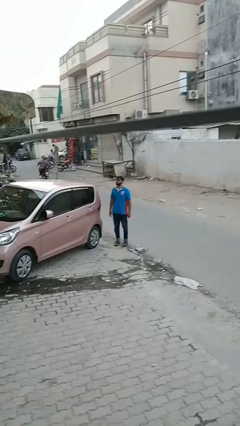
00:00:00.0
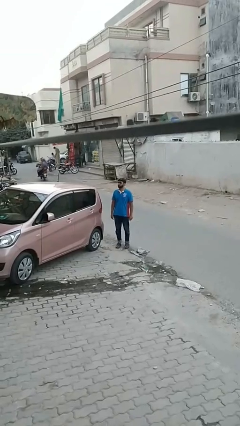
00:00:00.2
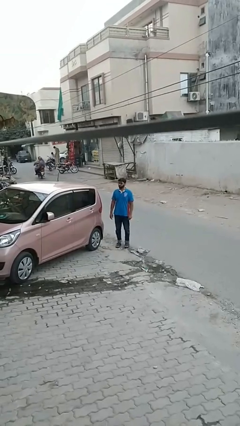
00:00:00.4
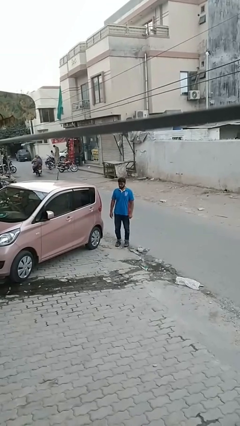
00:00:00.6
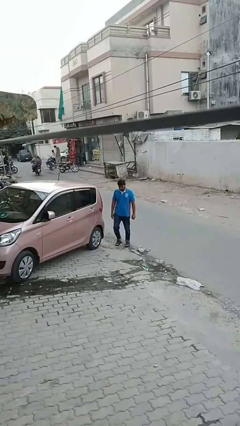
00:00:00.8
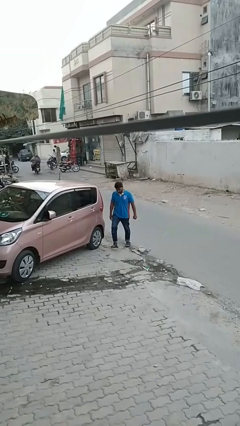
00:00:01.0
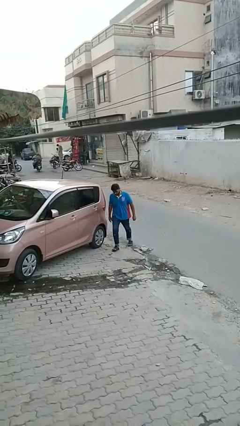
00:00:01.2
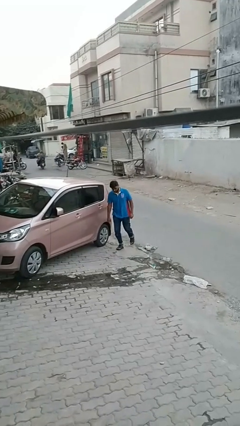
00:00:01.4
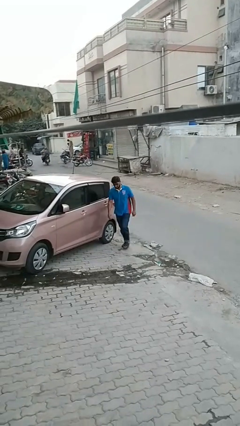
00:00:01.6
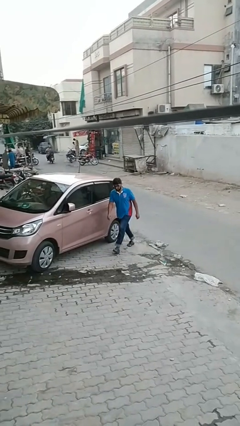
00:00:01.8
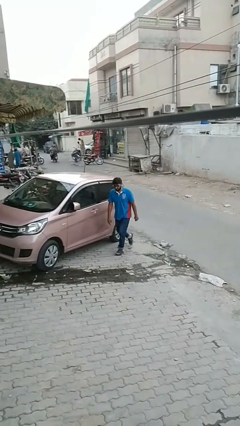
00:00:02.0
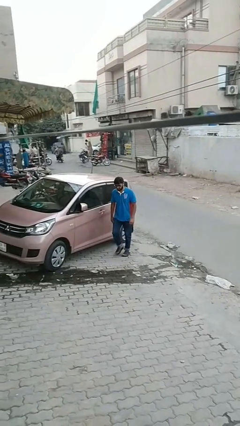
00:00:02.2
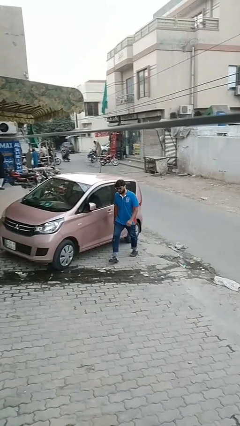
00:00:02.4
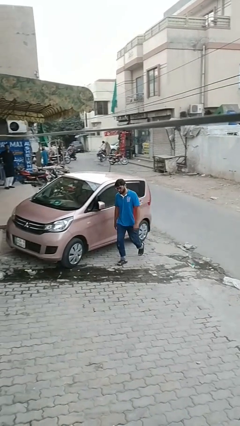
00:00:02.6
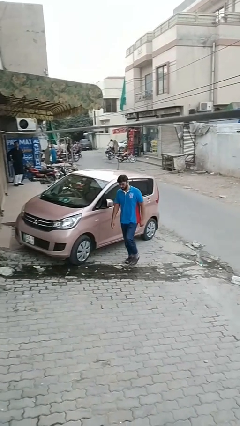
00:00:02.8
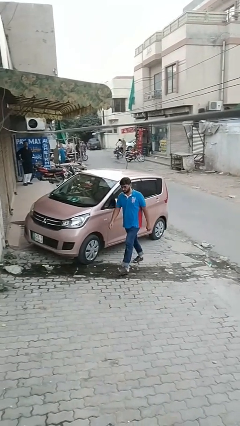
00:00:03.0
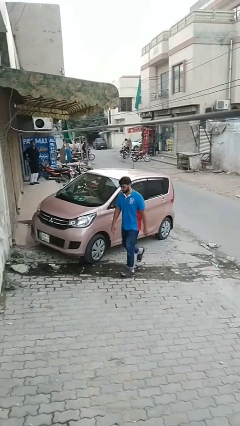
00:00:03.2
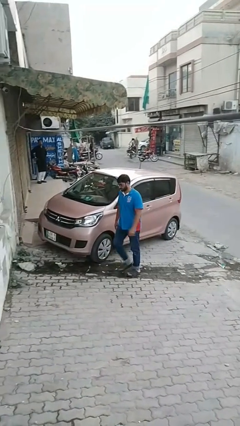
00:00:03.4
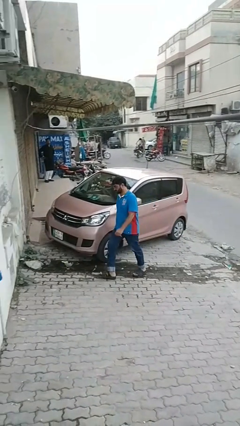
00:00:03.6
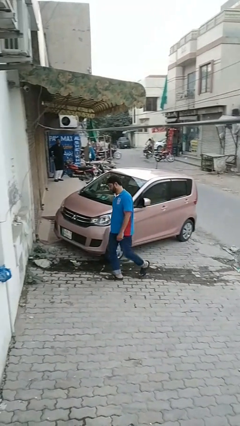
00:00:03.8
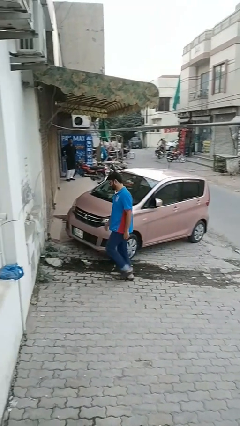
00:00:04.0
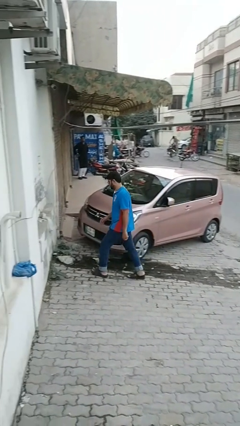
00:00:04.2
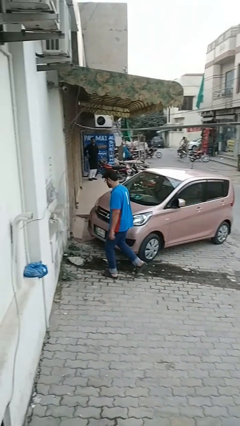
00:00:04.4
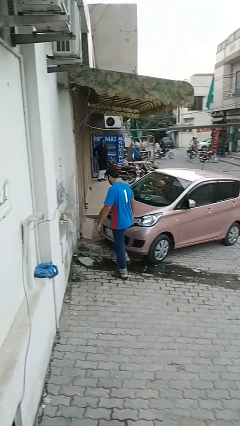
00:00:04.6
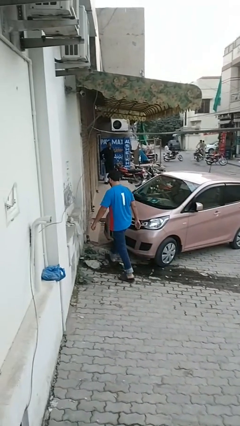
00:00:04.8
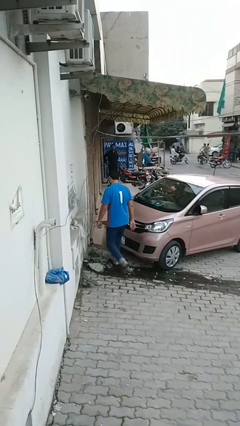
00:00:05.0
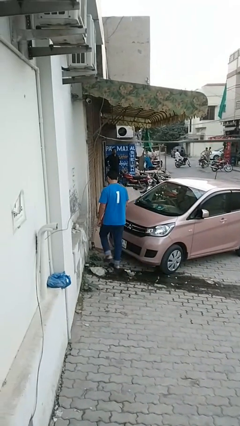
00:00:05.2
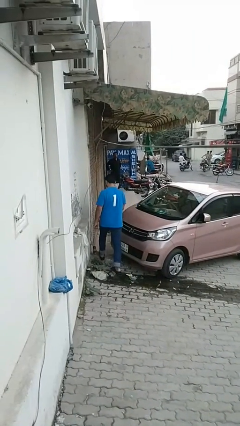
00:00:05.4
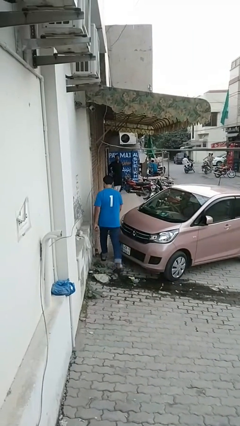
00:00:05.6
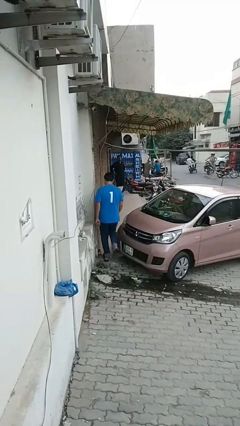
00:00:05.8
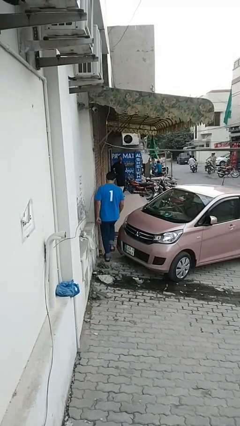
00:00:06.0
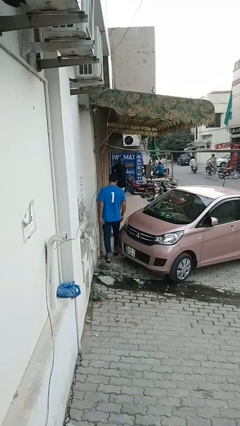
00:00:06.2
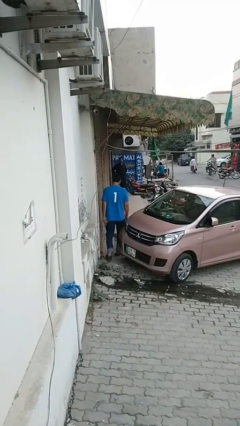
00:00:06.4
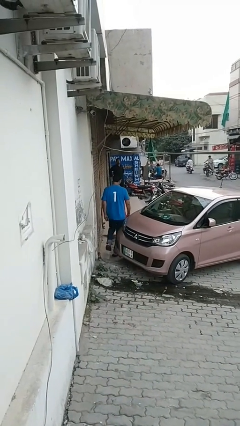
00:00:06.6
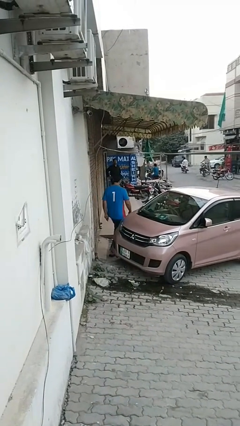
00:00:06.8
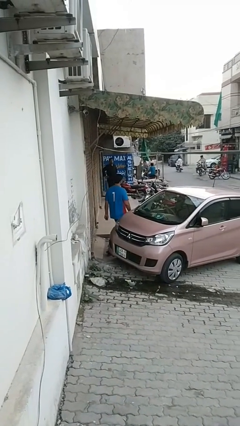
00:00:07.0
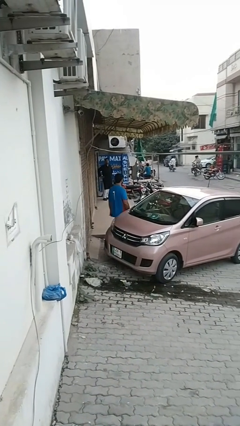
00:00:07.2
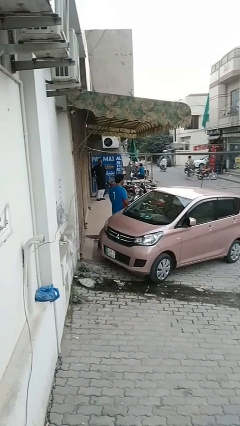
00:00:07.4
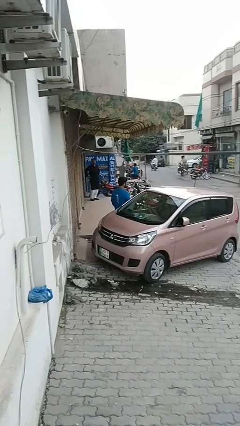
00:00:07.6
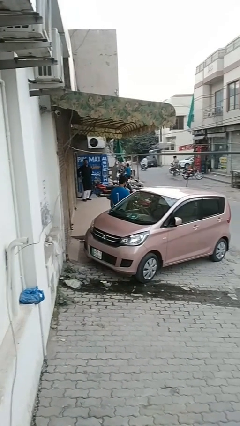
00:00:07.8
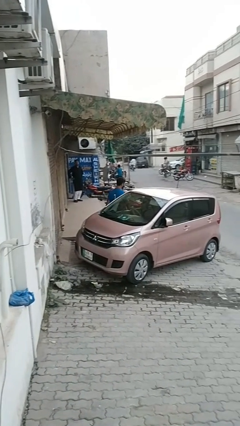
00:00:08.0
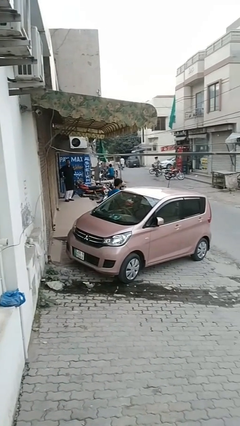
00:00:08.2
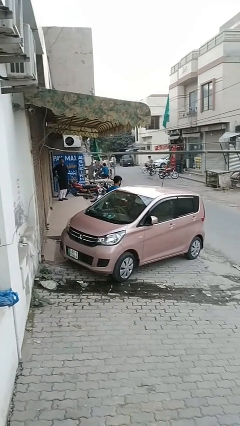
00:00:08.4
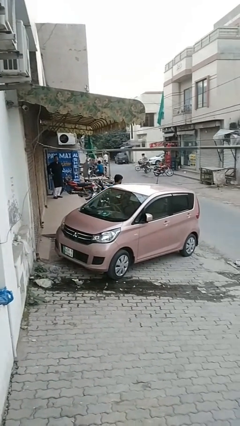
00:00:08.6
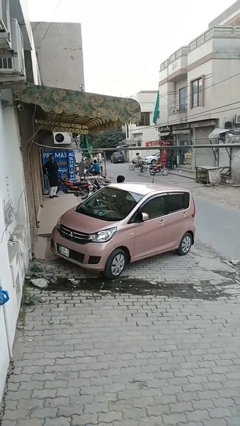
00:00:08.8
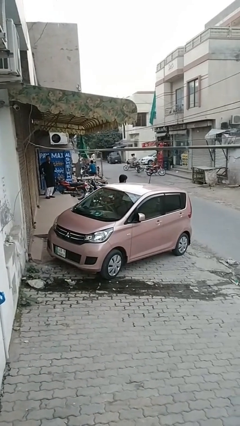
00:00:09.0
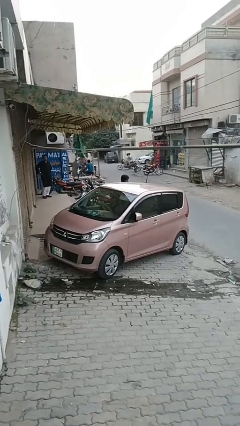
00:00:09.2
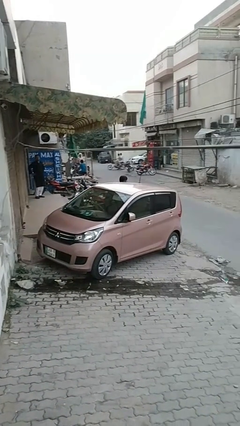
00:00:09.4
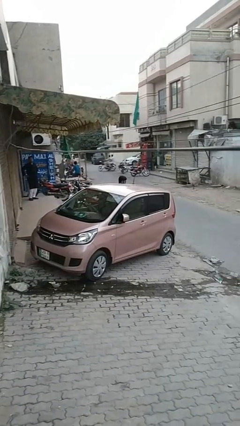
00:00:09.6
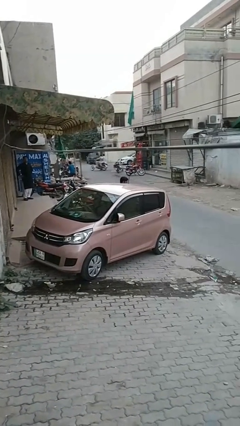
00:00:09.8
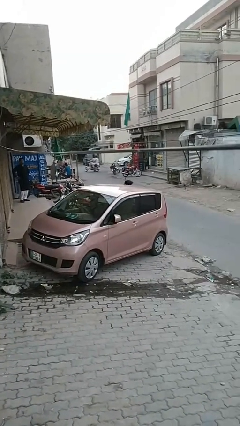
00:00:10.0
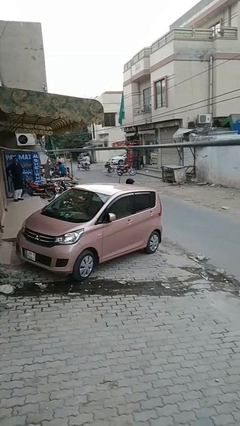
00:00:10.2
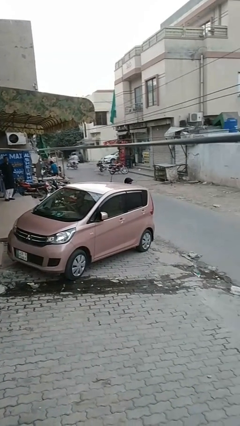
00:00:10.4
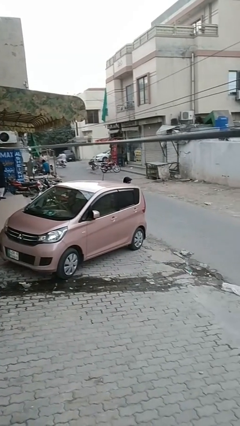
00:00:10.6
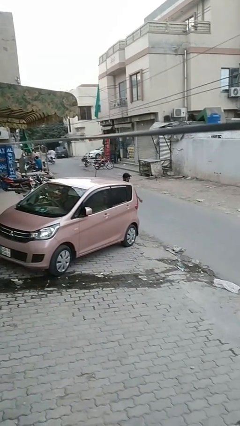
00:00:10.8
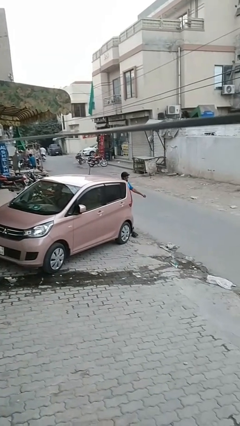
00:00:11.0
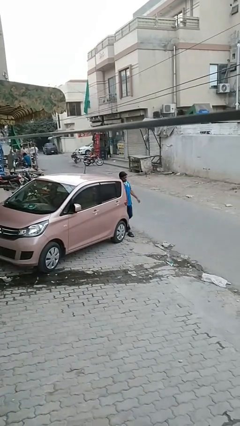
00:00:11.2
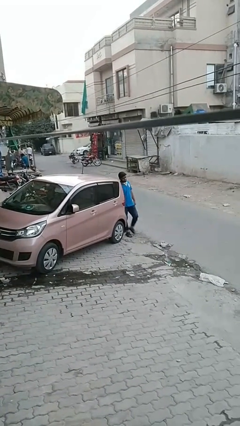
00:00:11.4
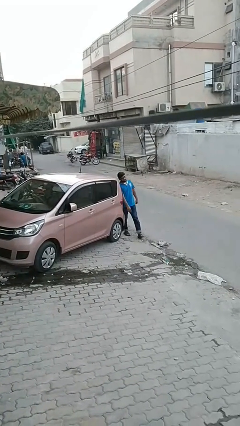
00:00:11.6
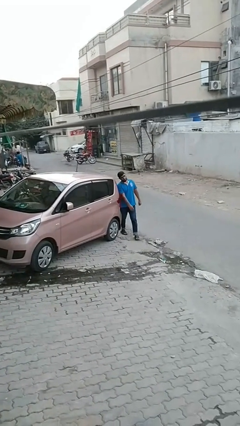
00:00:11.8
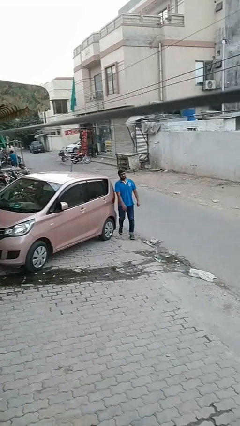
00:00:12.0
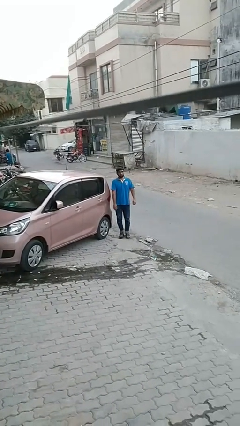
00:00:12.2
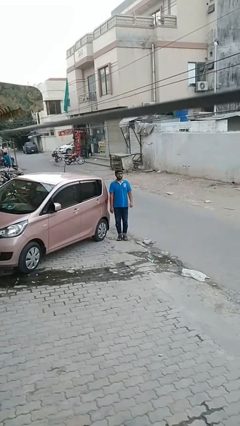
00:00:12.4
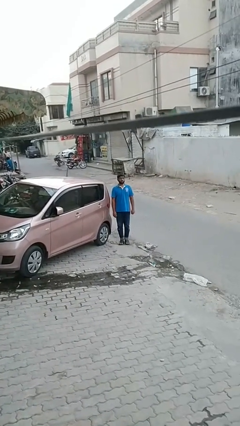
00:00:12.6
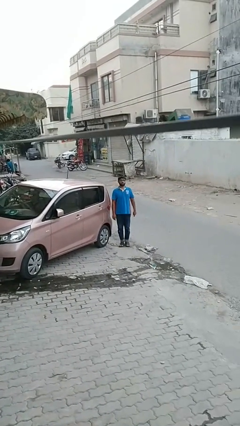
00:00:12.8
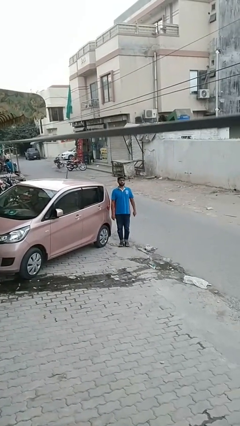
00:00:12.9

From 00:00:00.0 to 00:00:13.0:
person walks around car

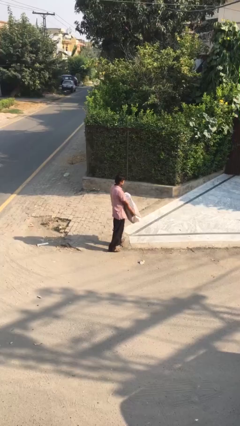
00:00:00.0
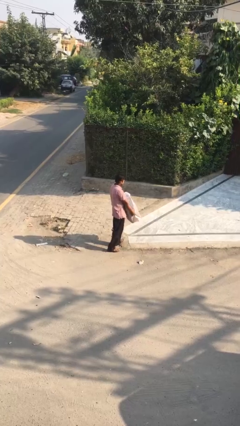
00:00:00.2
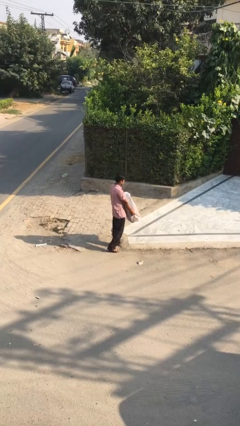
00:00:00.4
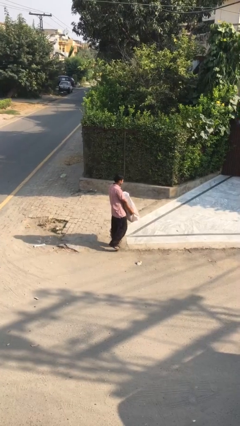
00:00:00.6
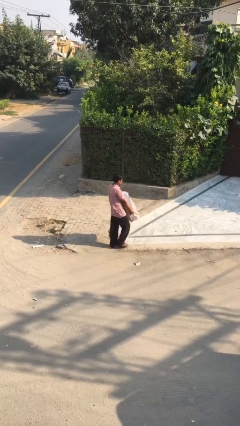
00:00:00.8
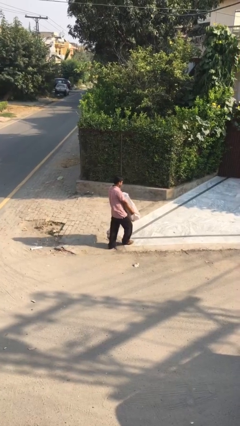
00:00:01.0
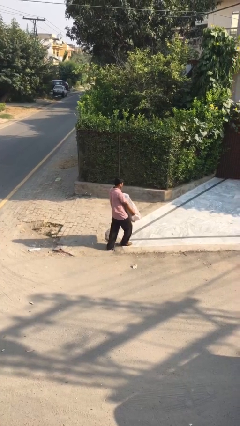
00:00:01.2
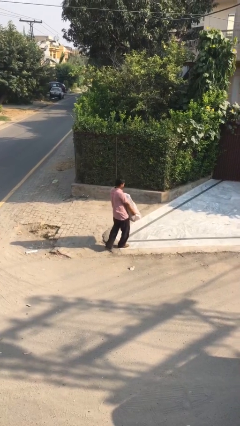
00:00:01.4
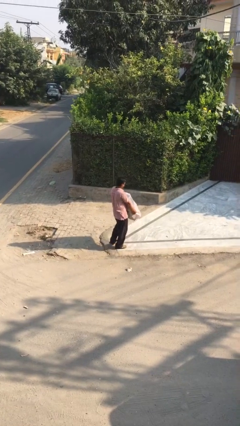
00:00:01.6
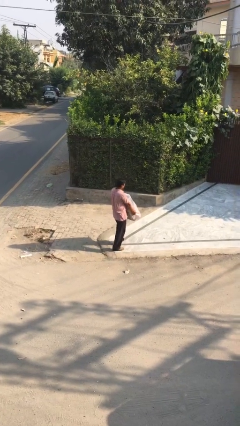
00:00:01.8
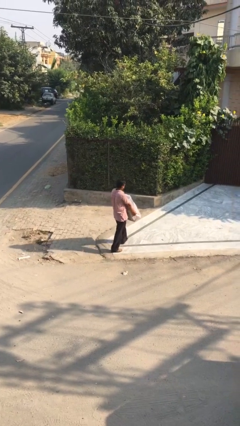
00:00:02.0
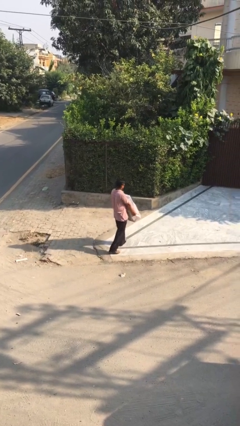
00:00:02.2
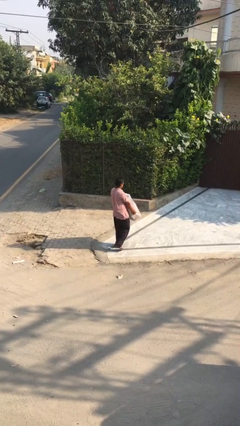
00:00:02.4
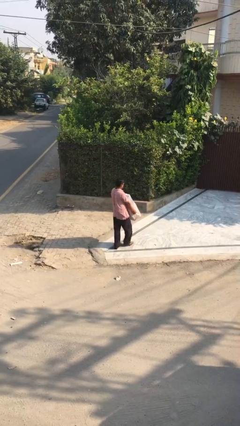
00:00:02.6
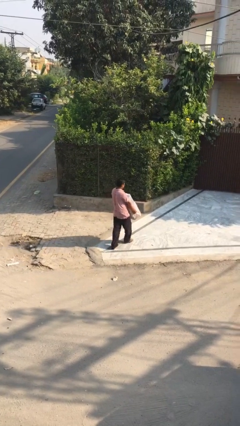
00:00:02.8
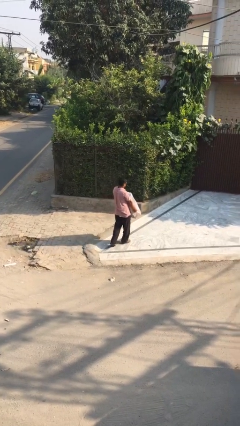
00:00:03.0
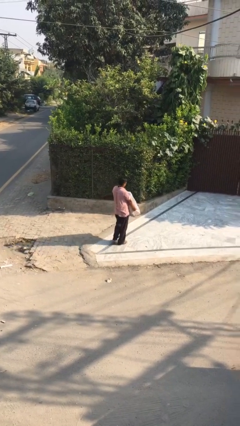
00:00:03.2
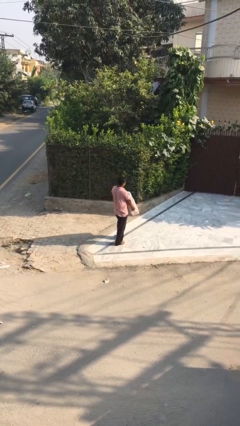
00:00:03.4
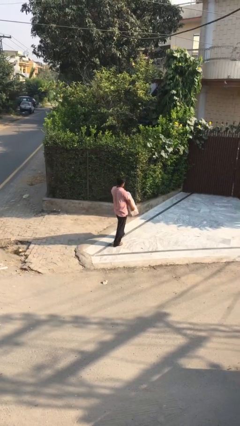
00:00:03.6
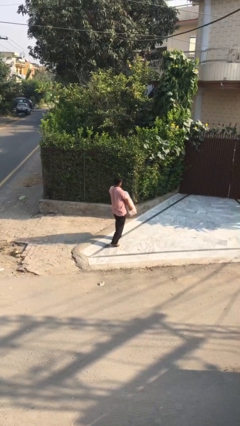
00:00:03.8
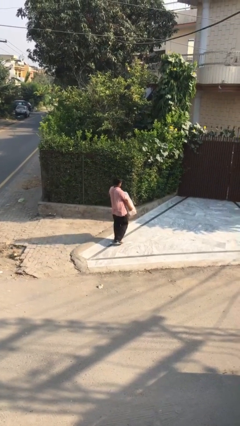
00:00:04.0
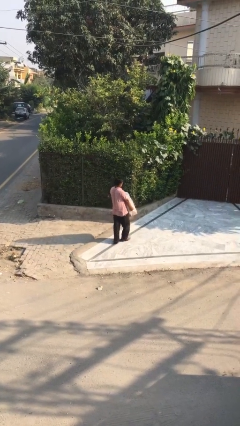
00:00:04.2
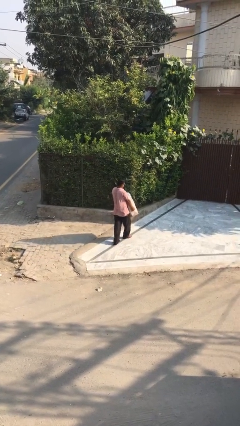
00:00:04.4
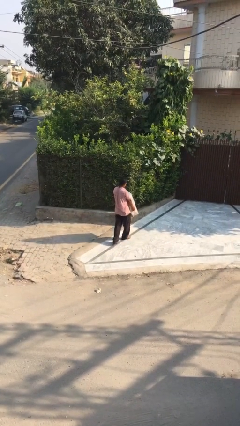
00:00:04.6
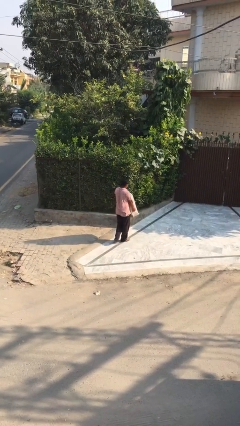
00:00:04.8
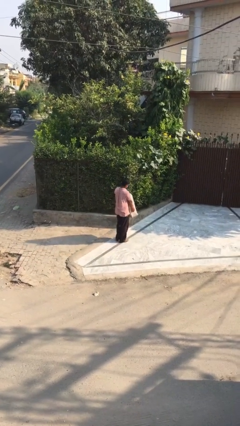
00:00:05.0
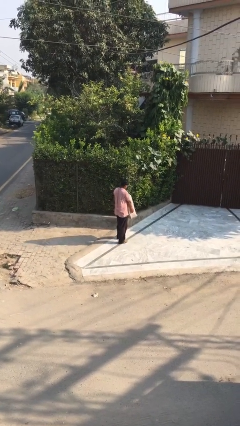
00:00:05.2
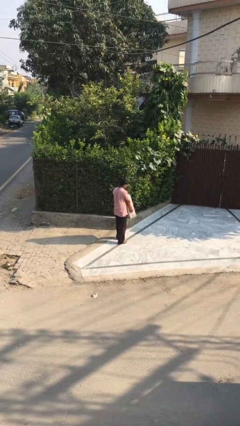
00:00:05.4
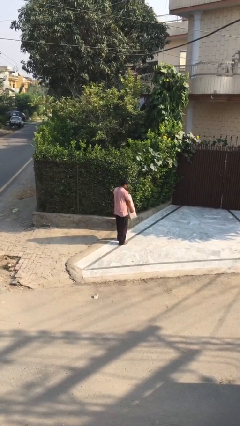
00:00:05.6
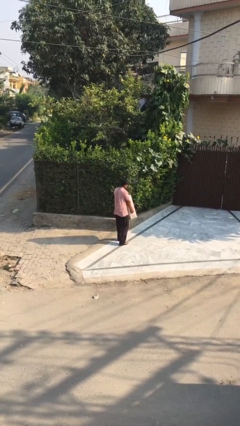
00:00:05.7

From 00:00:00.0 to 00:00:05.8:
person carries heavy object
